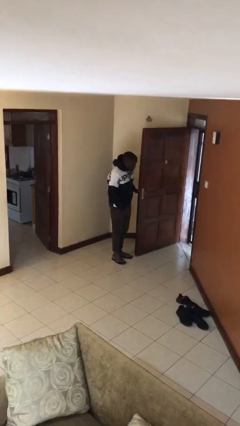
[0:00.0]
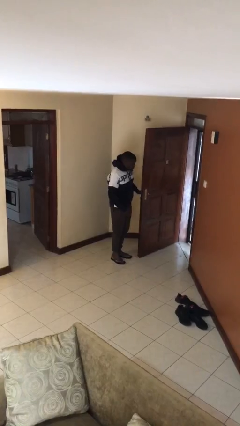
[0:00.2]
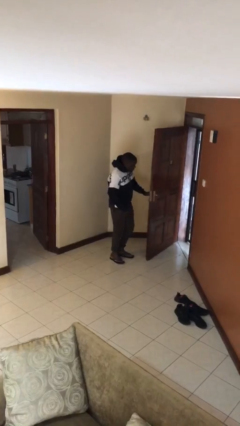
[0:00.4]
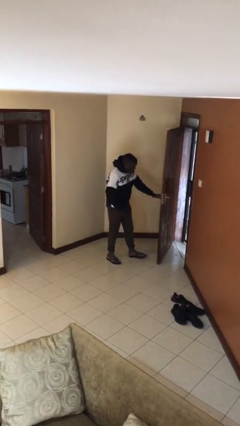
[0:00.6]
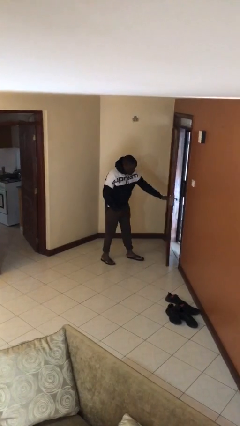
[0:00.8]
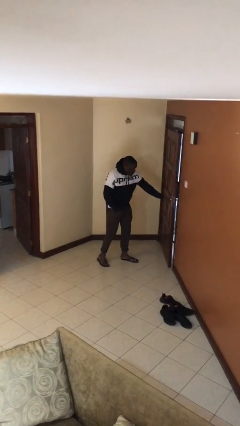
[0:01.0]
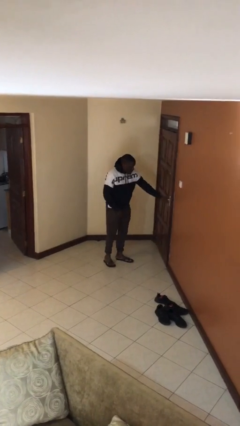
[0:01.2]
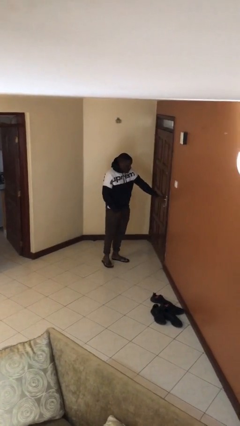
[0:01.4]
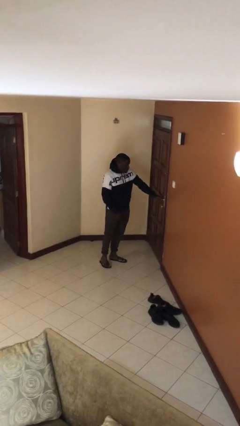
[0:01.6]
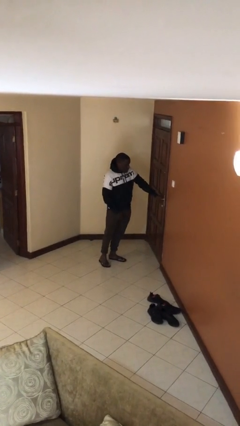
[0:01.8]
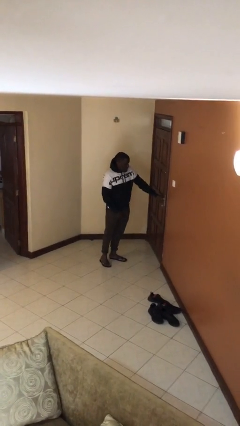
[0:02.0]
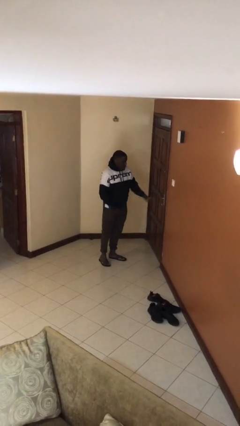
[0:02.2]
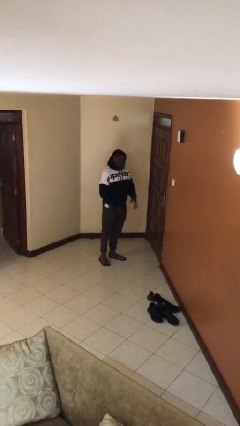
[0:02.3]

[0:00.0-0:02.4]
person closes facility door

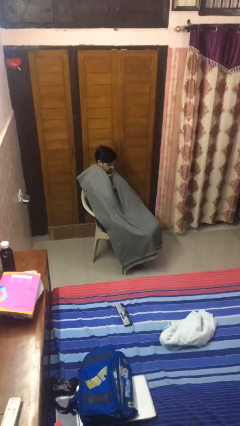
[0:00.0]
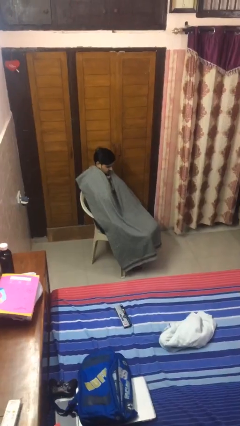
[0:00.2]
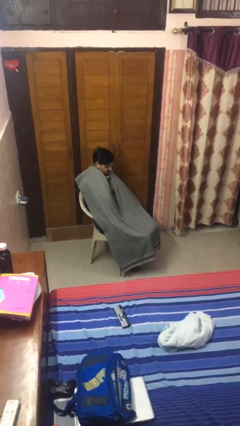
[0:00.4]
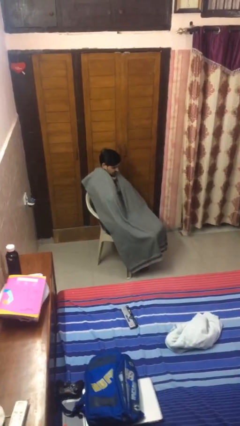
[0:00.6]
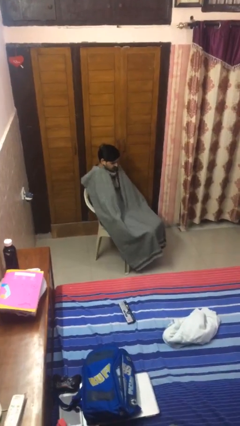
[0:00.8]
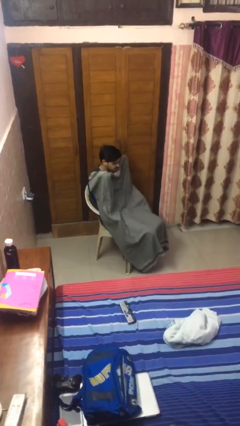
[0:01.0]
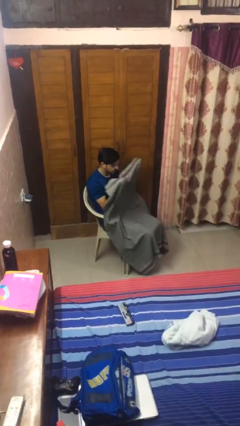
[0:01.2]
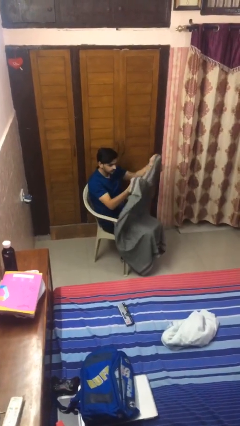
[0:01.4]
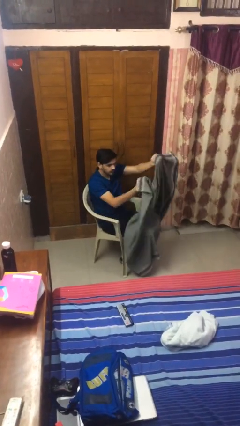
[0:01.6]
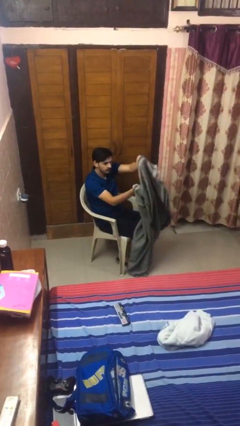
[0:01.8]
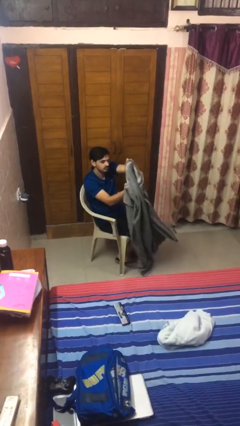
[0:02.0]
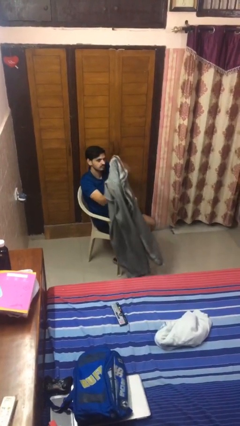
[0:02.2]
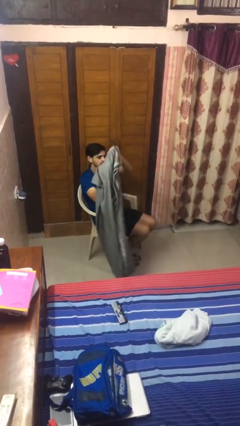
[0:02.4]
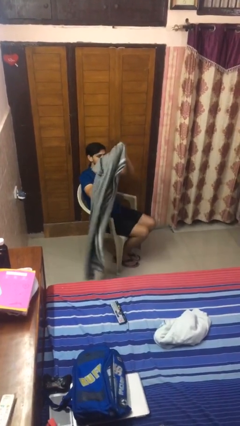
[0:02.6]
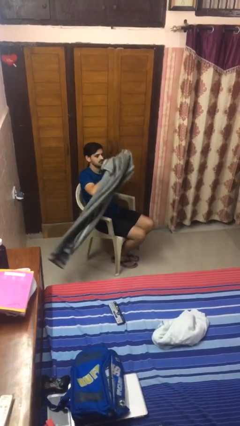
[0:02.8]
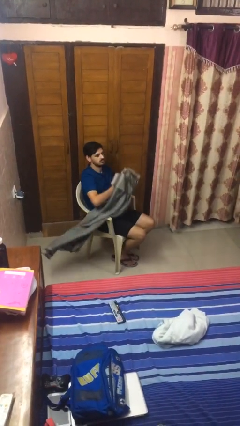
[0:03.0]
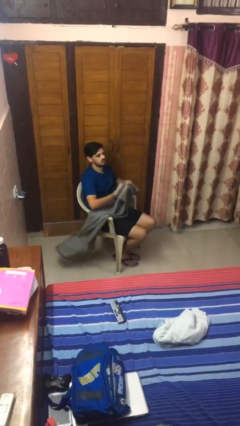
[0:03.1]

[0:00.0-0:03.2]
person uncovers with blanket

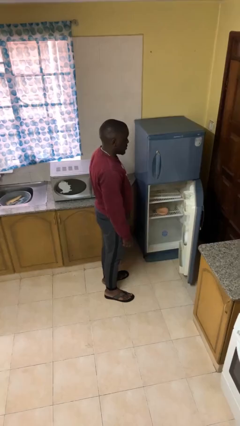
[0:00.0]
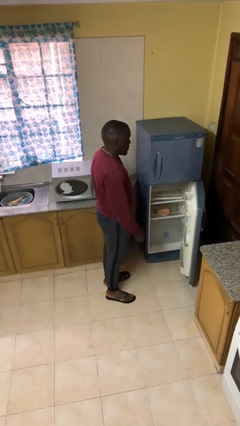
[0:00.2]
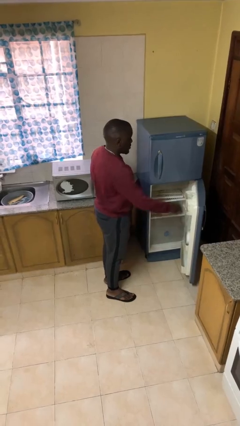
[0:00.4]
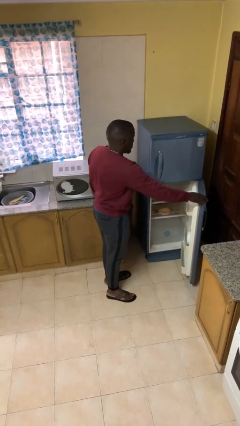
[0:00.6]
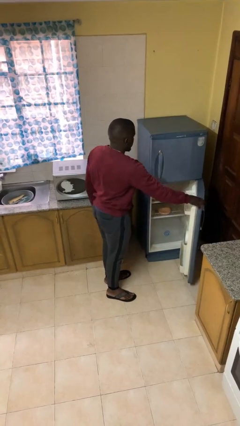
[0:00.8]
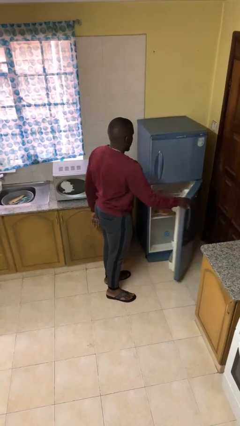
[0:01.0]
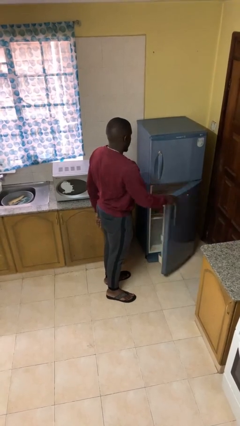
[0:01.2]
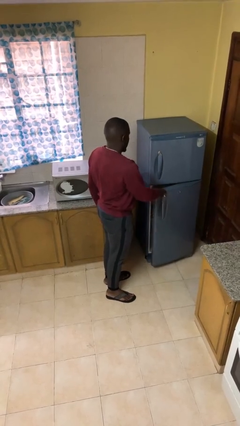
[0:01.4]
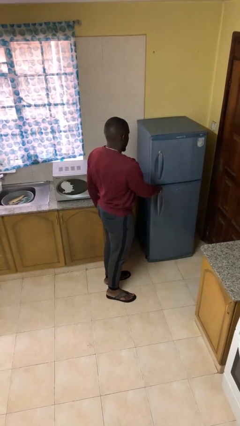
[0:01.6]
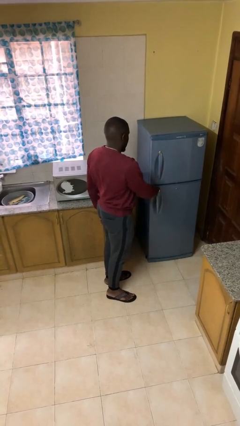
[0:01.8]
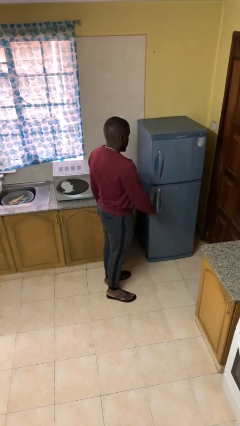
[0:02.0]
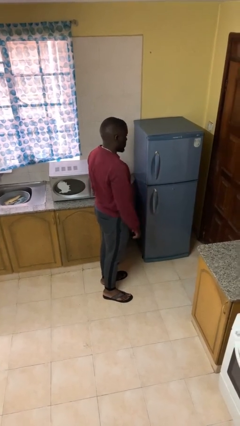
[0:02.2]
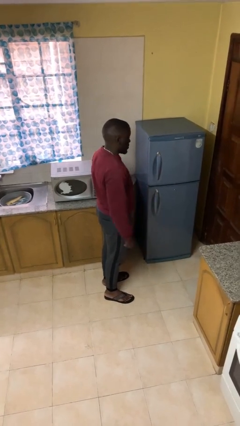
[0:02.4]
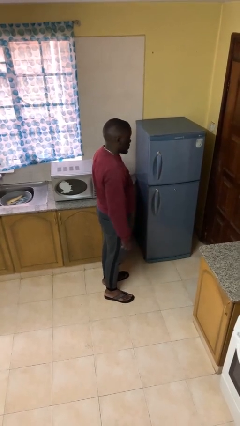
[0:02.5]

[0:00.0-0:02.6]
person closes refrigerator

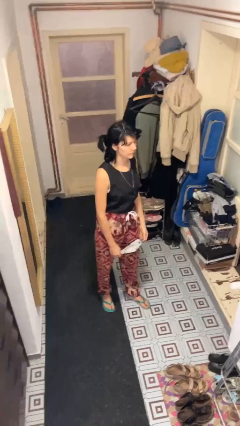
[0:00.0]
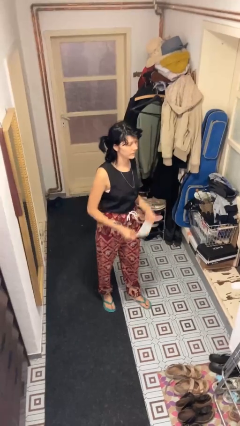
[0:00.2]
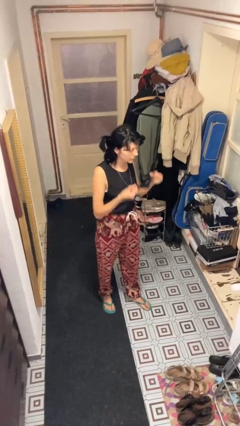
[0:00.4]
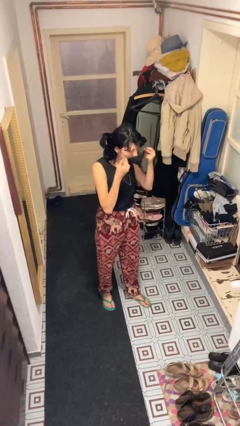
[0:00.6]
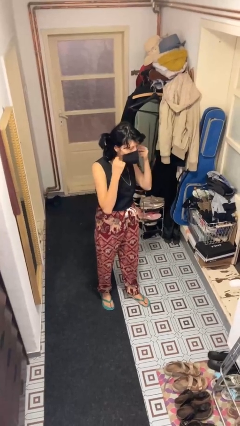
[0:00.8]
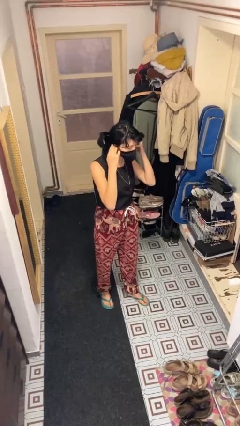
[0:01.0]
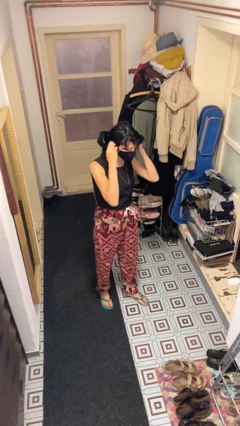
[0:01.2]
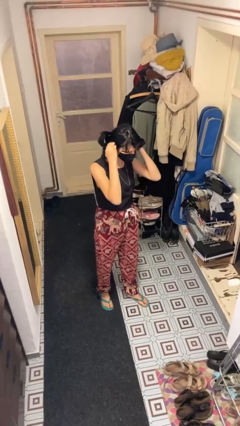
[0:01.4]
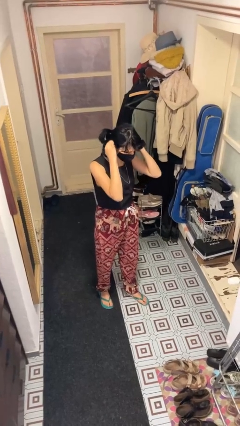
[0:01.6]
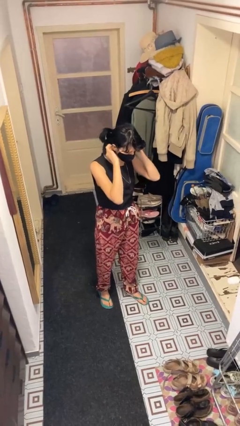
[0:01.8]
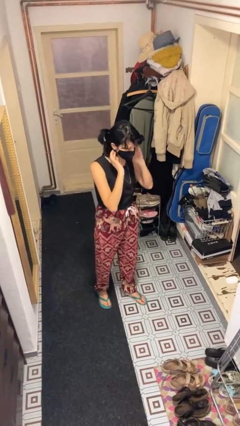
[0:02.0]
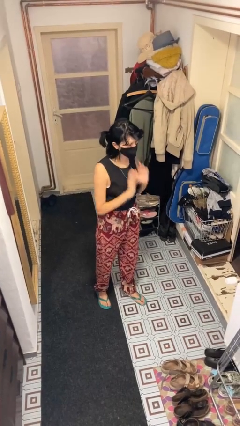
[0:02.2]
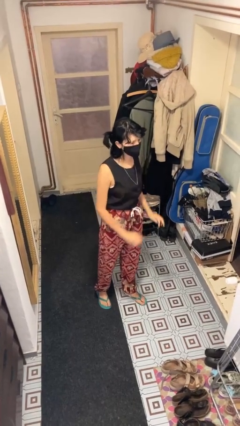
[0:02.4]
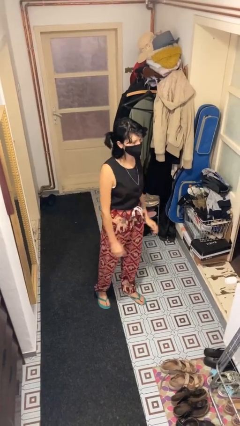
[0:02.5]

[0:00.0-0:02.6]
person puts on facemask

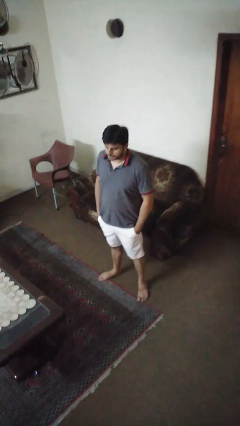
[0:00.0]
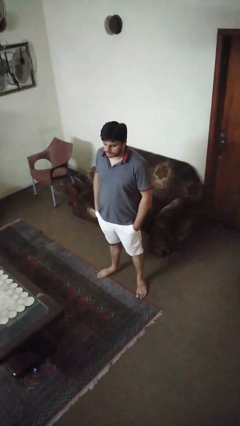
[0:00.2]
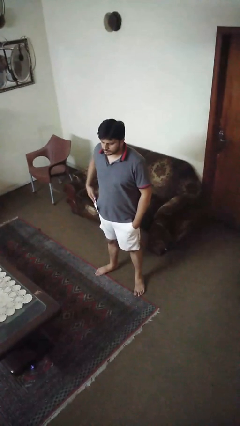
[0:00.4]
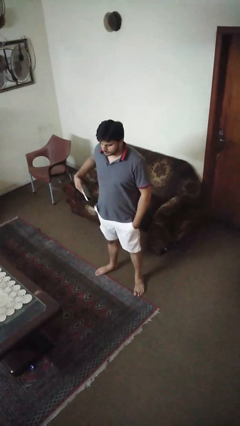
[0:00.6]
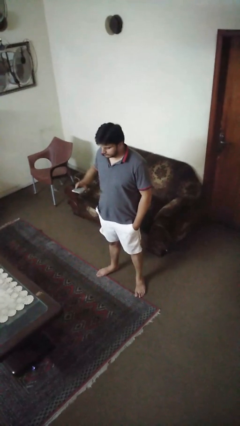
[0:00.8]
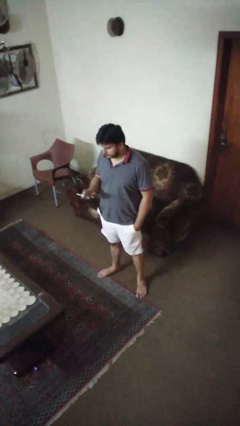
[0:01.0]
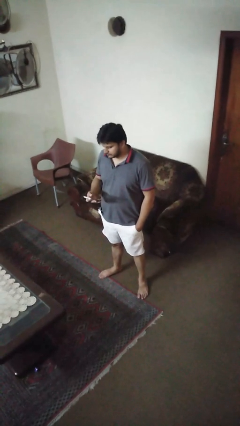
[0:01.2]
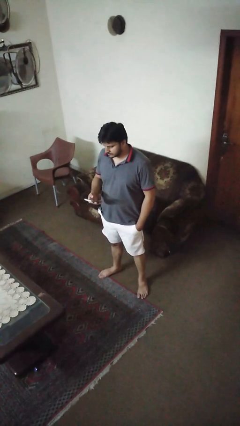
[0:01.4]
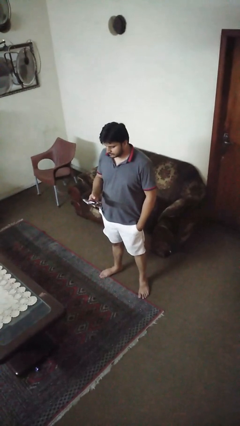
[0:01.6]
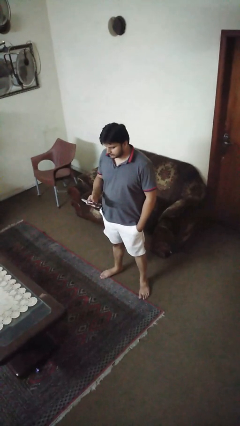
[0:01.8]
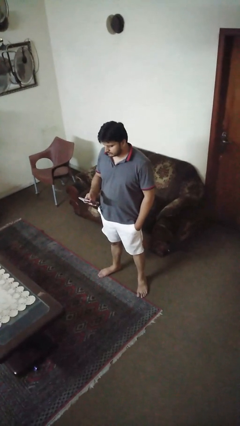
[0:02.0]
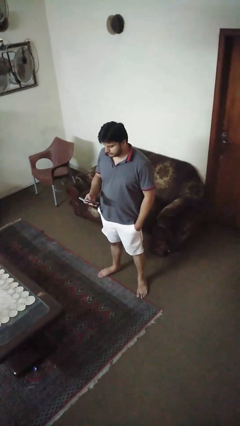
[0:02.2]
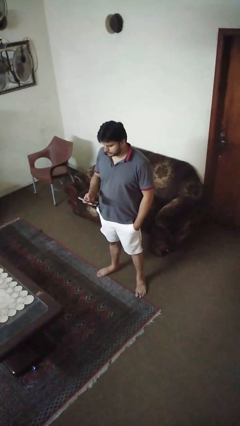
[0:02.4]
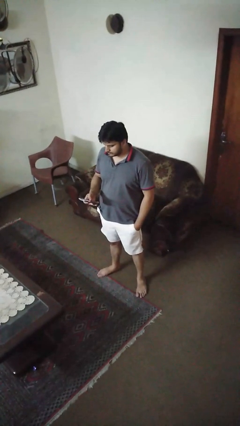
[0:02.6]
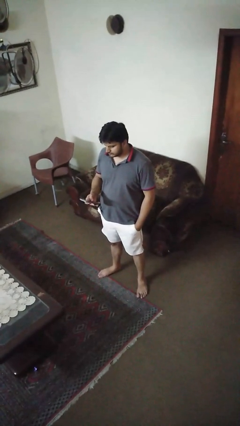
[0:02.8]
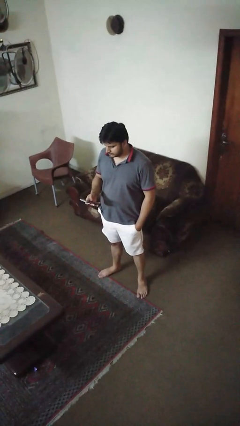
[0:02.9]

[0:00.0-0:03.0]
person takes phone from pocket

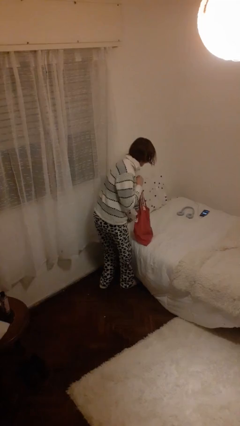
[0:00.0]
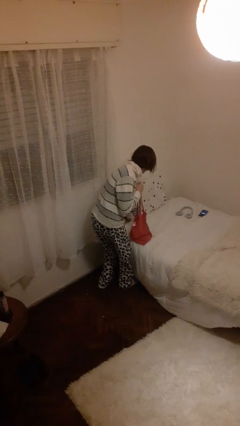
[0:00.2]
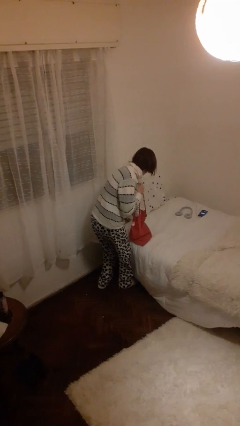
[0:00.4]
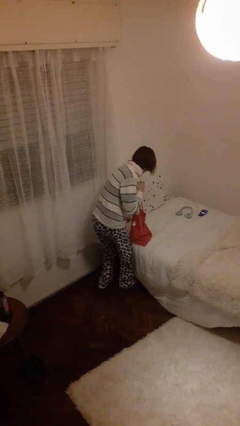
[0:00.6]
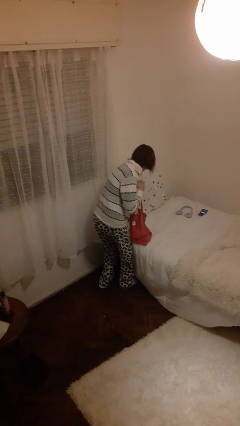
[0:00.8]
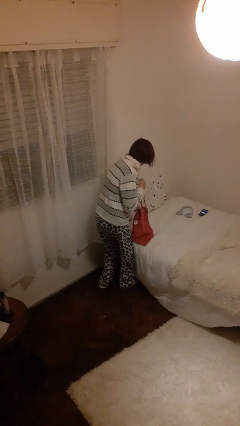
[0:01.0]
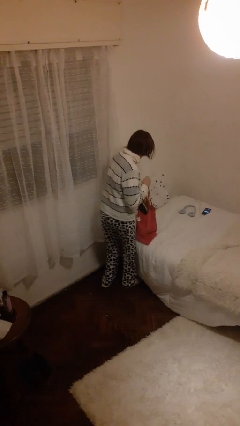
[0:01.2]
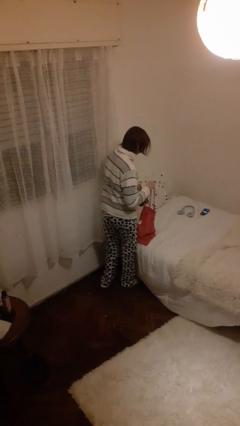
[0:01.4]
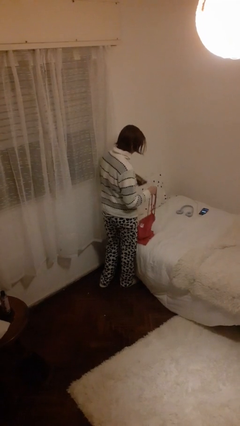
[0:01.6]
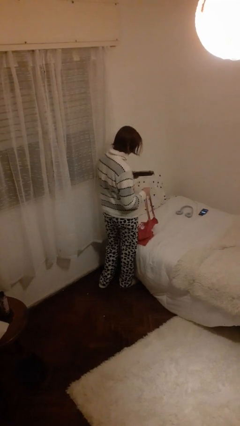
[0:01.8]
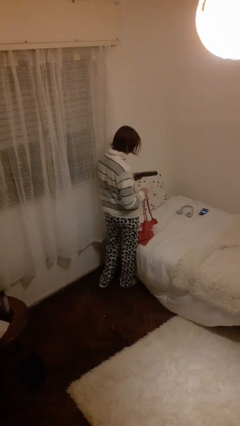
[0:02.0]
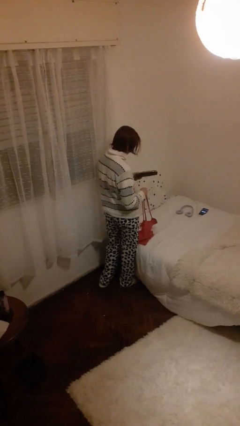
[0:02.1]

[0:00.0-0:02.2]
person takes object from bag

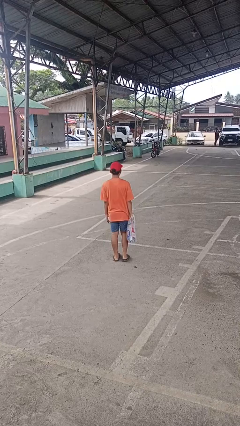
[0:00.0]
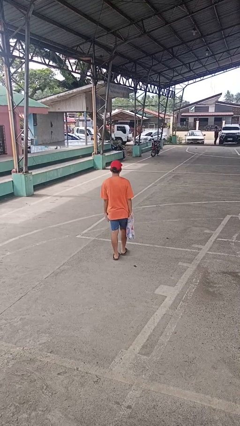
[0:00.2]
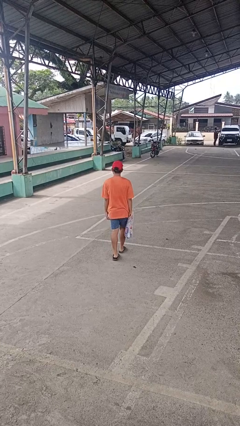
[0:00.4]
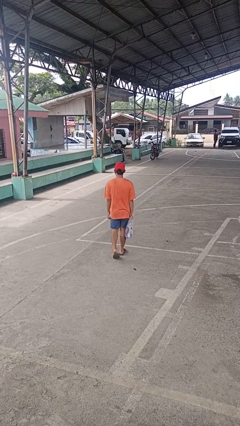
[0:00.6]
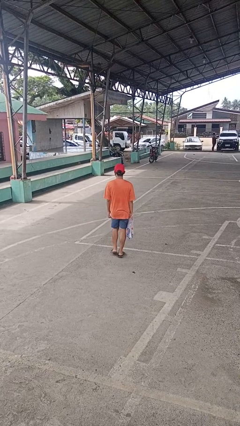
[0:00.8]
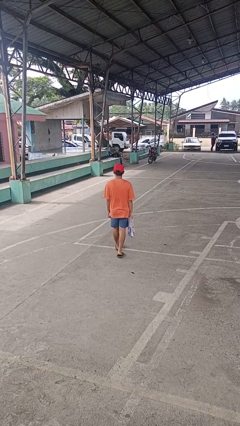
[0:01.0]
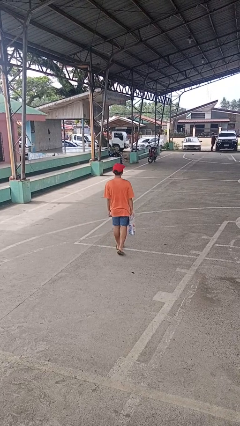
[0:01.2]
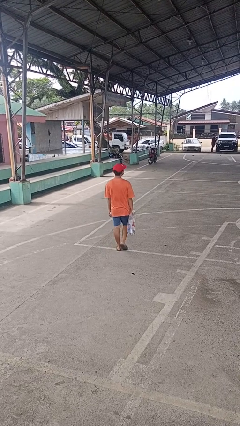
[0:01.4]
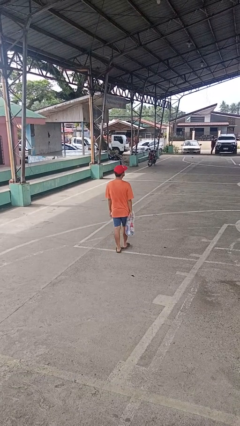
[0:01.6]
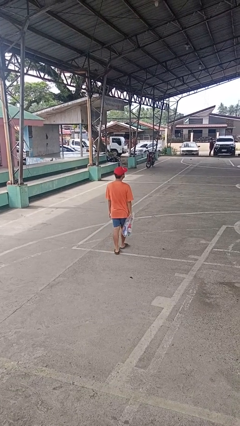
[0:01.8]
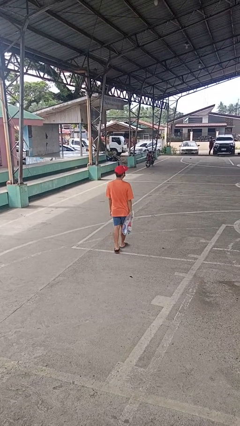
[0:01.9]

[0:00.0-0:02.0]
person carries groceries
